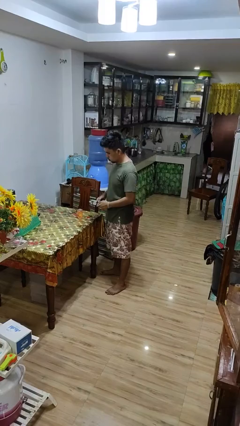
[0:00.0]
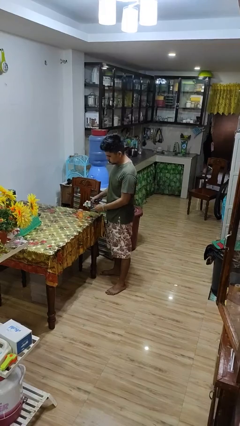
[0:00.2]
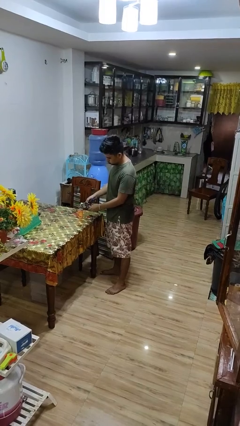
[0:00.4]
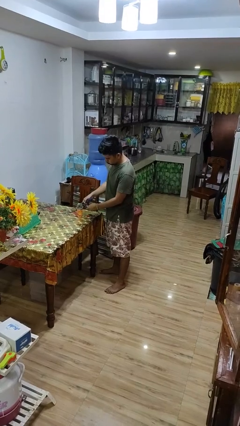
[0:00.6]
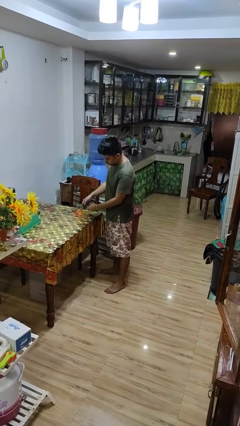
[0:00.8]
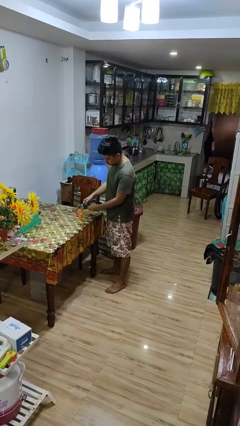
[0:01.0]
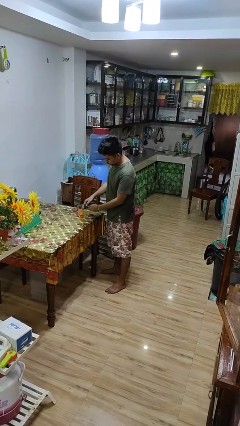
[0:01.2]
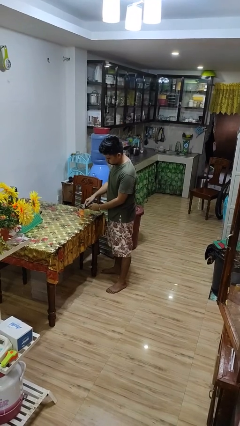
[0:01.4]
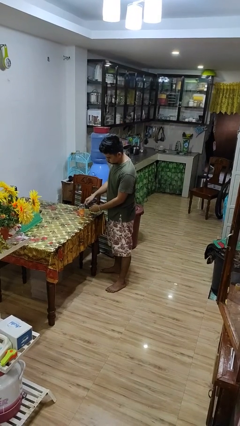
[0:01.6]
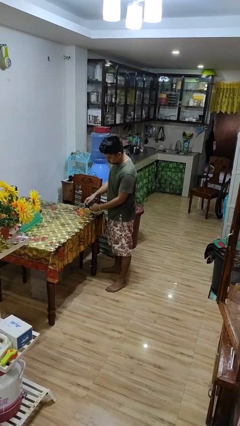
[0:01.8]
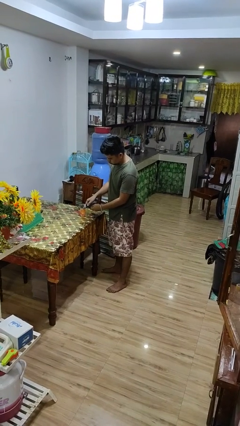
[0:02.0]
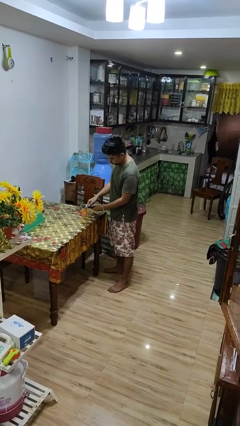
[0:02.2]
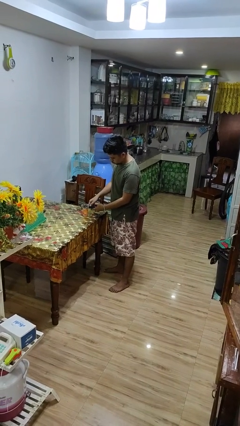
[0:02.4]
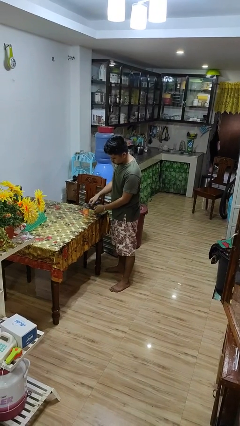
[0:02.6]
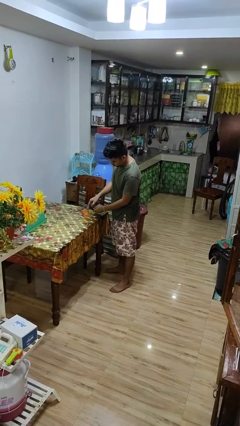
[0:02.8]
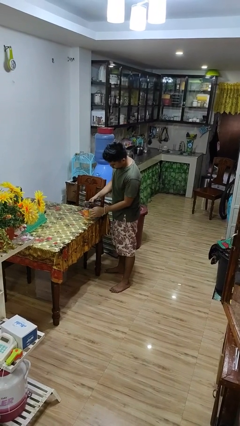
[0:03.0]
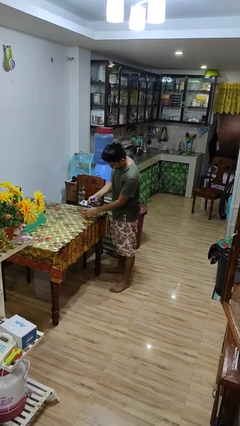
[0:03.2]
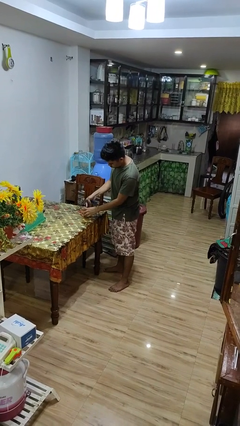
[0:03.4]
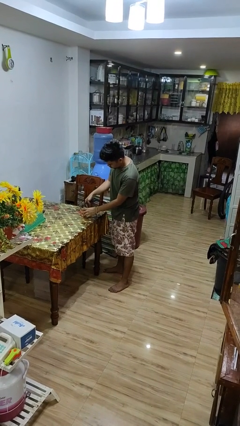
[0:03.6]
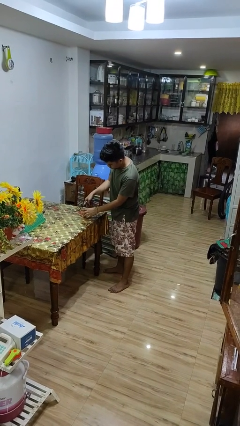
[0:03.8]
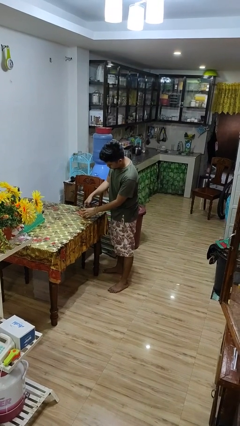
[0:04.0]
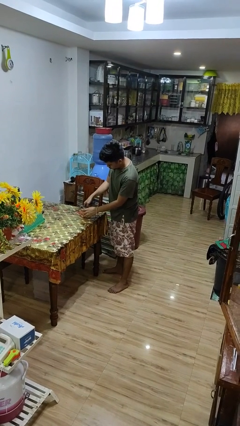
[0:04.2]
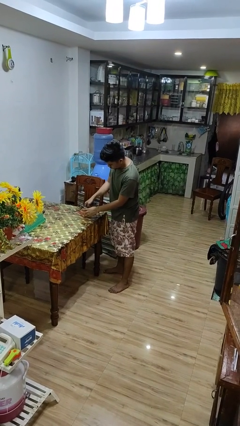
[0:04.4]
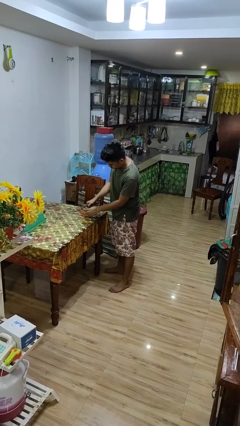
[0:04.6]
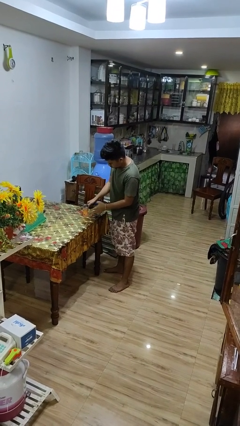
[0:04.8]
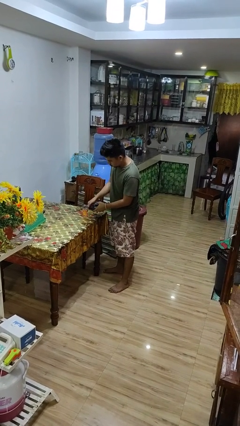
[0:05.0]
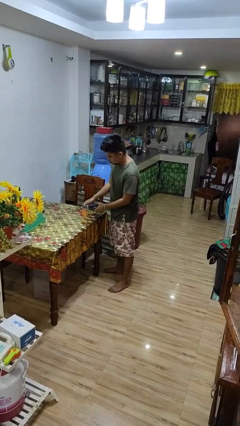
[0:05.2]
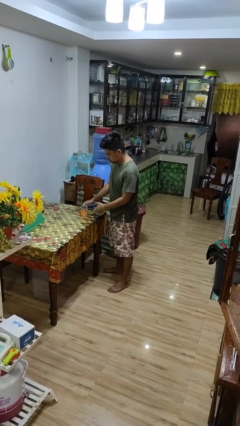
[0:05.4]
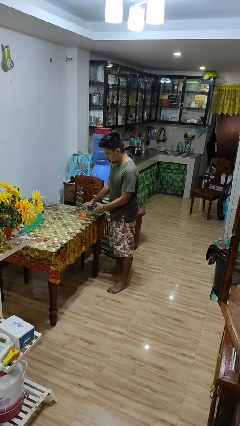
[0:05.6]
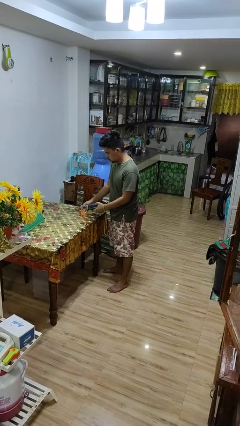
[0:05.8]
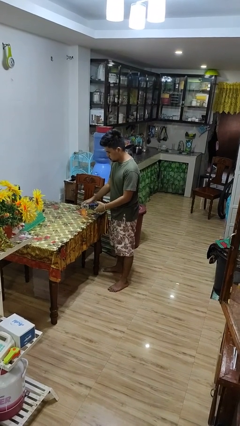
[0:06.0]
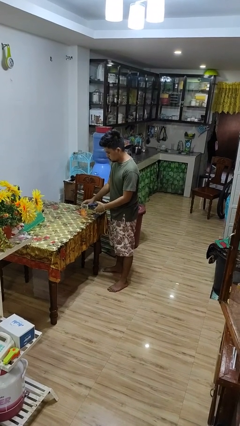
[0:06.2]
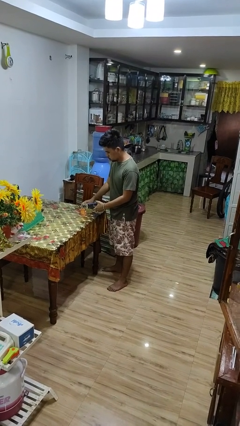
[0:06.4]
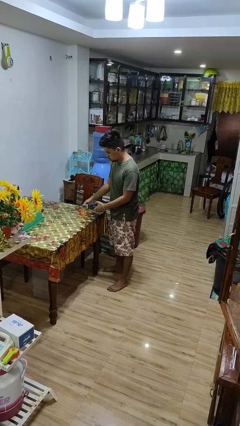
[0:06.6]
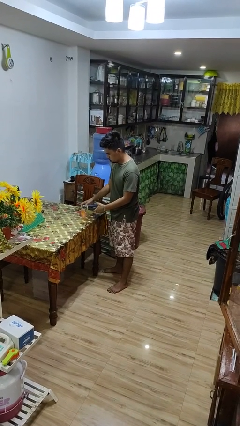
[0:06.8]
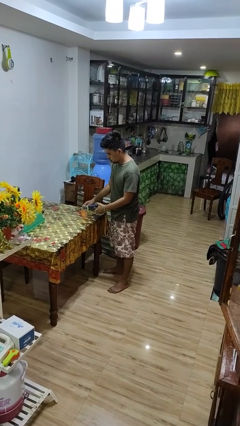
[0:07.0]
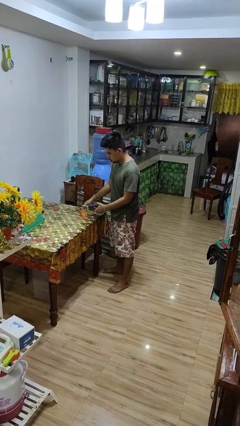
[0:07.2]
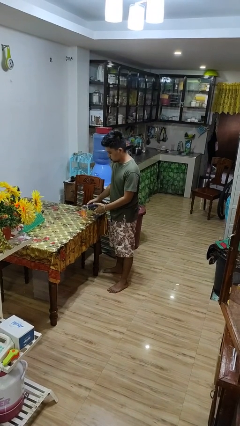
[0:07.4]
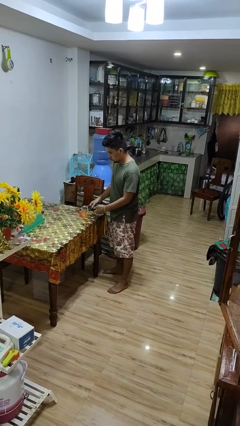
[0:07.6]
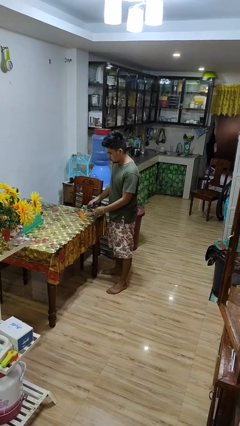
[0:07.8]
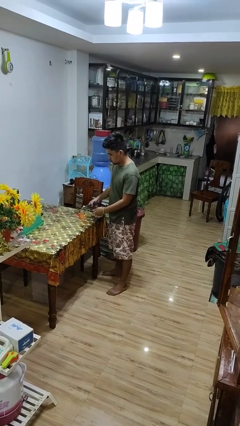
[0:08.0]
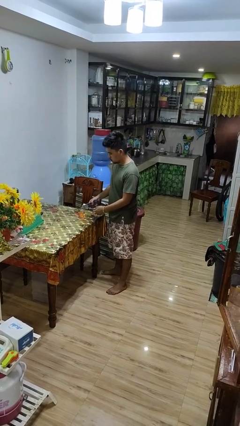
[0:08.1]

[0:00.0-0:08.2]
person opens can with can opener

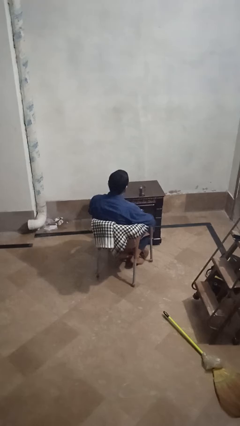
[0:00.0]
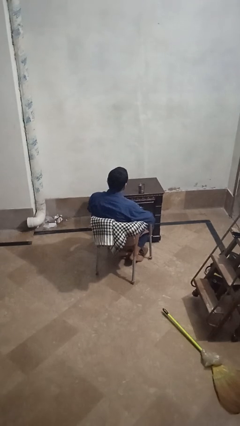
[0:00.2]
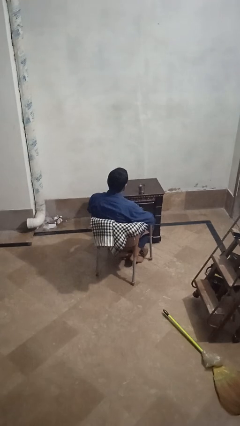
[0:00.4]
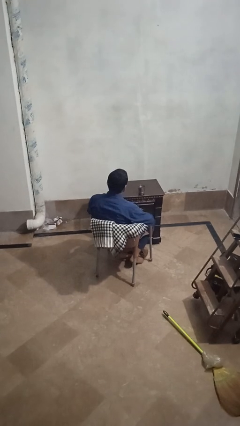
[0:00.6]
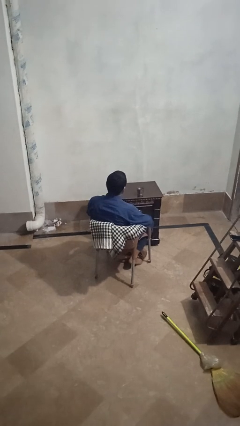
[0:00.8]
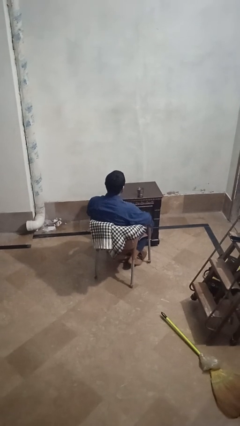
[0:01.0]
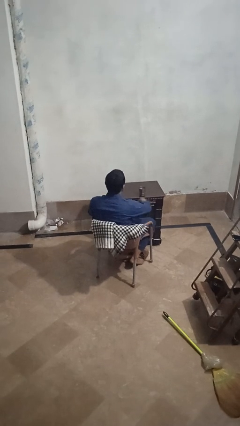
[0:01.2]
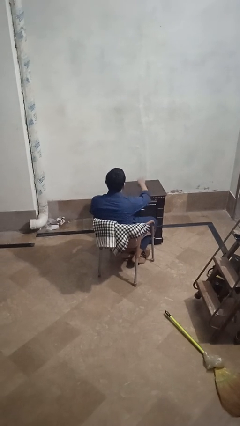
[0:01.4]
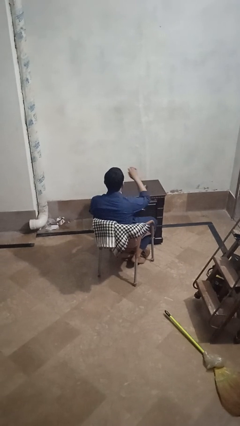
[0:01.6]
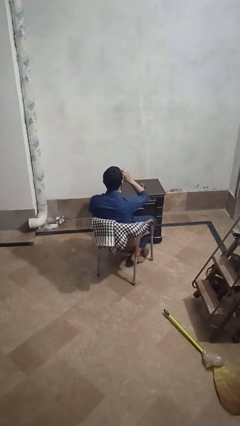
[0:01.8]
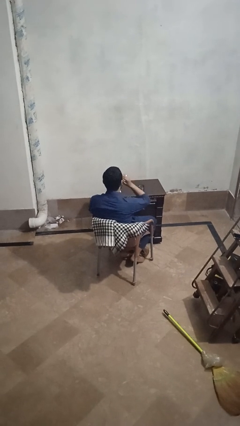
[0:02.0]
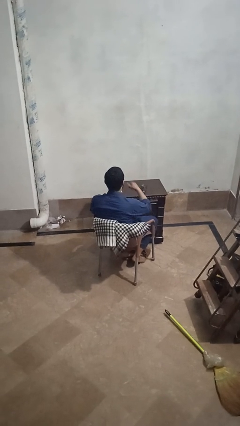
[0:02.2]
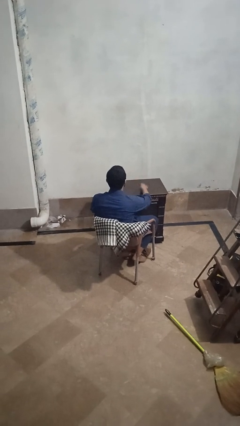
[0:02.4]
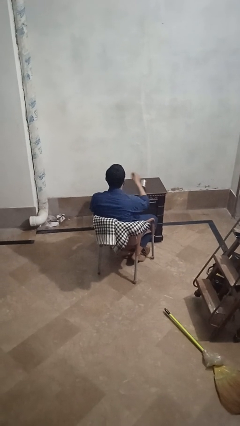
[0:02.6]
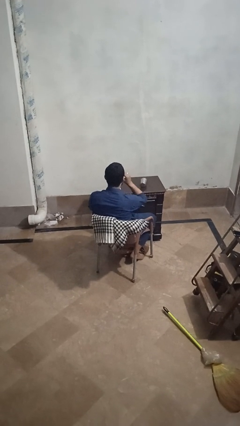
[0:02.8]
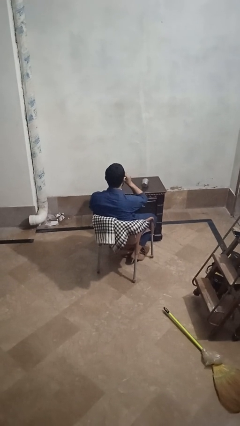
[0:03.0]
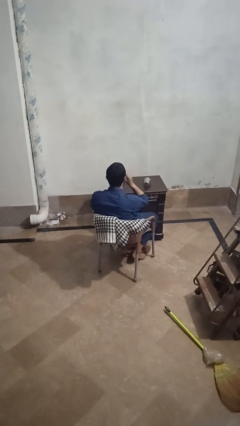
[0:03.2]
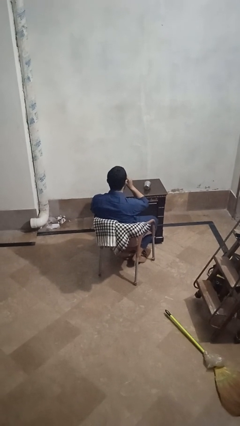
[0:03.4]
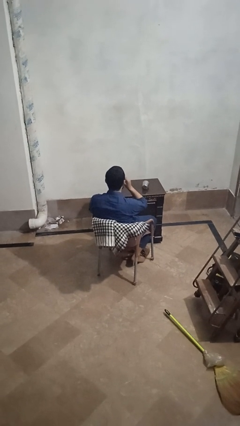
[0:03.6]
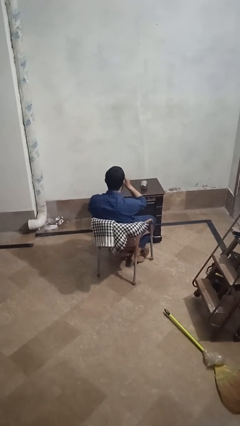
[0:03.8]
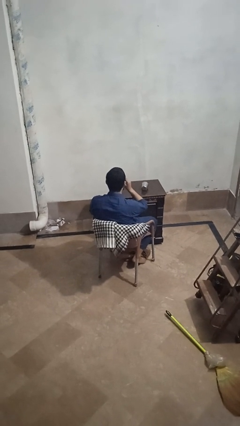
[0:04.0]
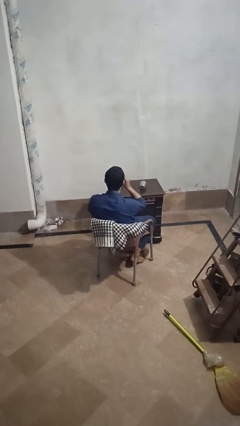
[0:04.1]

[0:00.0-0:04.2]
person knocks over glass

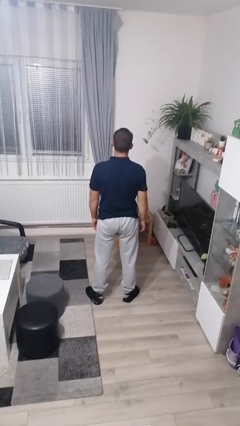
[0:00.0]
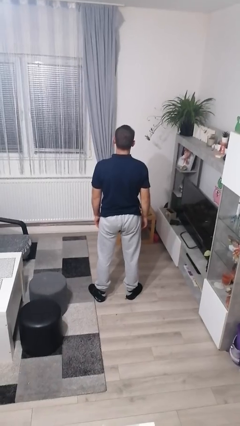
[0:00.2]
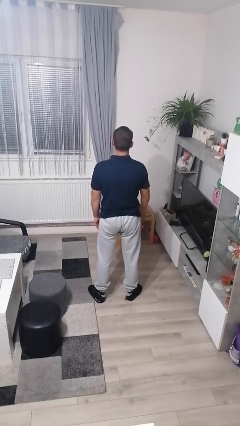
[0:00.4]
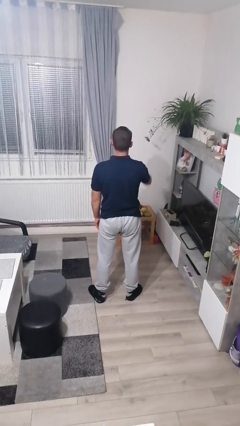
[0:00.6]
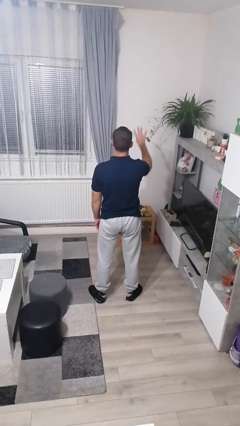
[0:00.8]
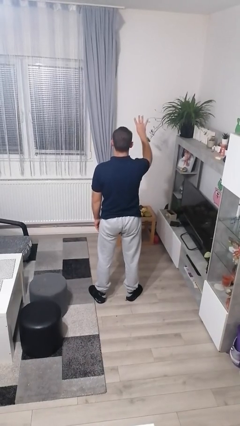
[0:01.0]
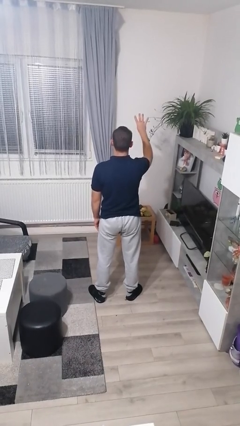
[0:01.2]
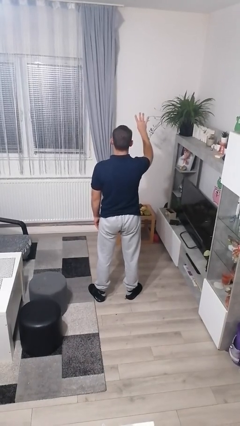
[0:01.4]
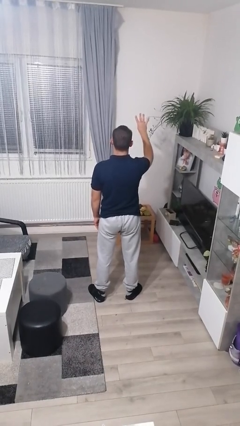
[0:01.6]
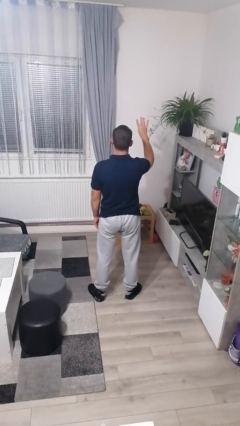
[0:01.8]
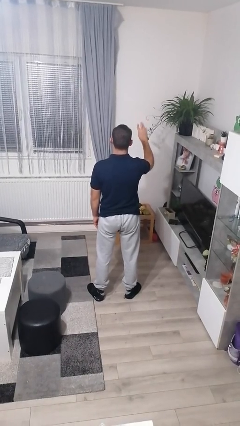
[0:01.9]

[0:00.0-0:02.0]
person gestures number four

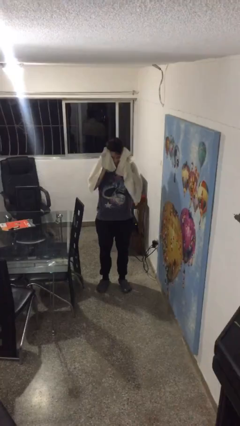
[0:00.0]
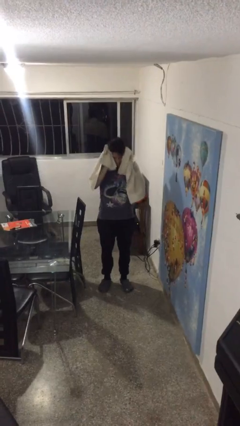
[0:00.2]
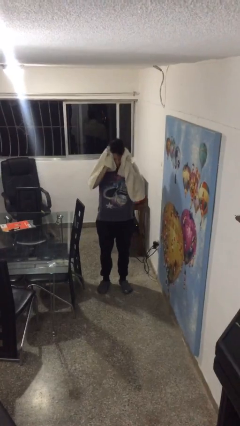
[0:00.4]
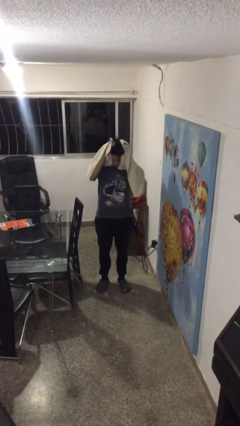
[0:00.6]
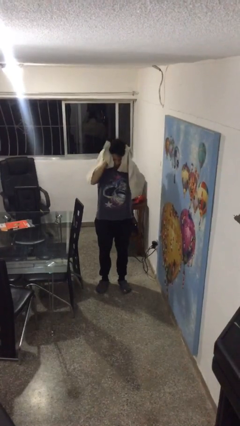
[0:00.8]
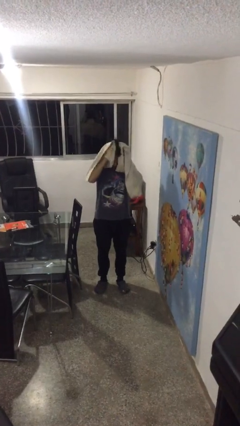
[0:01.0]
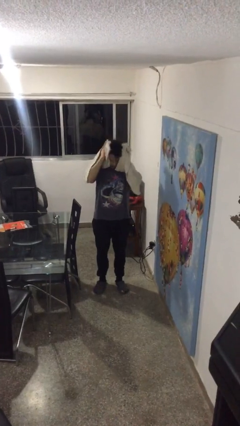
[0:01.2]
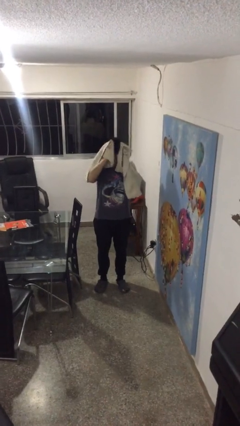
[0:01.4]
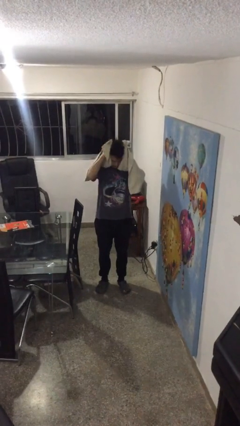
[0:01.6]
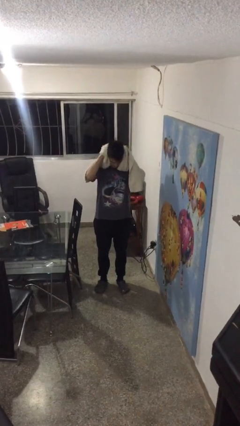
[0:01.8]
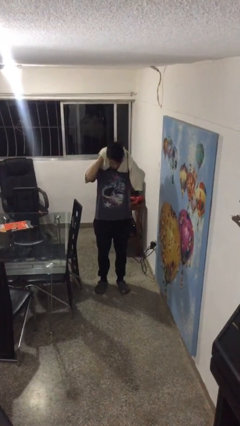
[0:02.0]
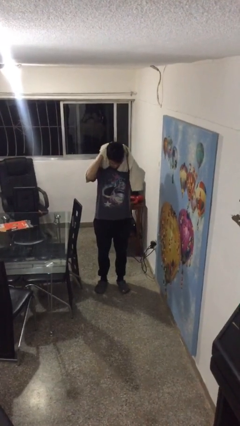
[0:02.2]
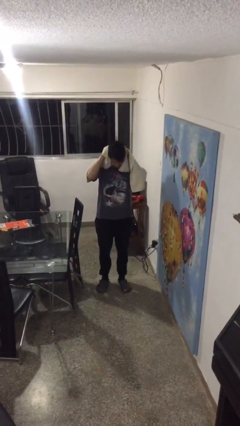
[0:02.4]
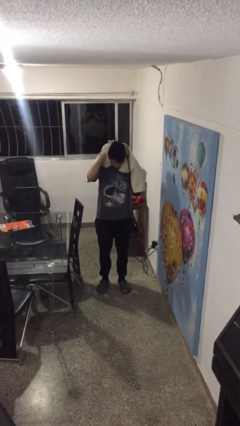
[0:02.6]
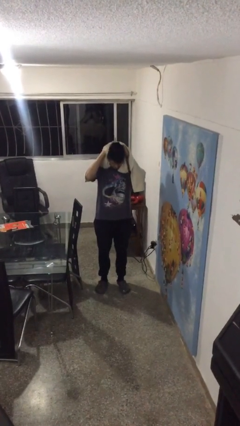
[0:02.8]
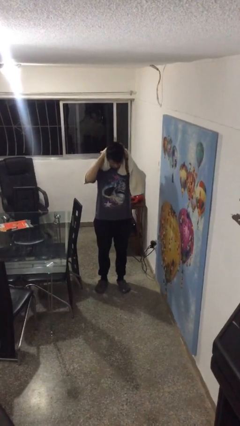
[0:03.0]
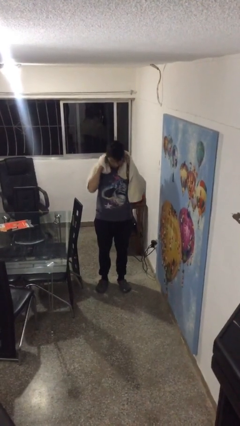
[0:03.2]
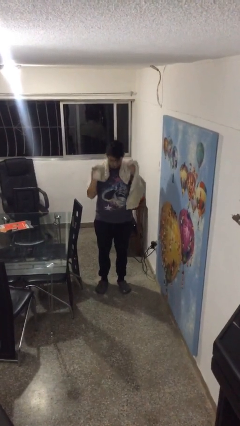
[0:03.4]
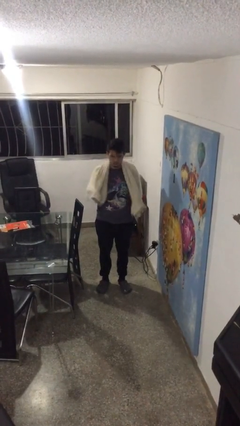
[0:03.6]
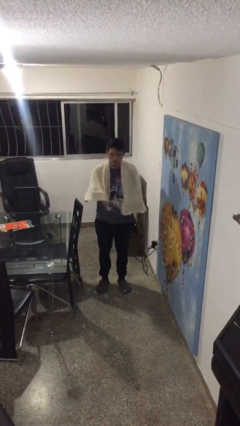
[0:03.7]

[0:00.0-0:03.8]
person dries hair with towel
